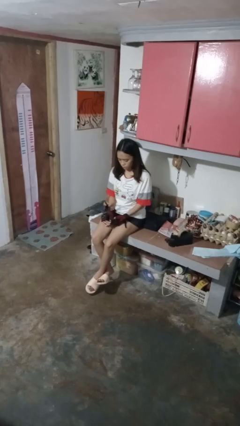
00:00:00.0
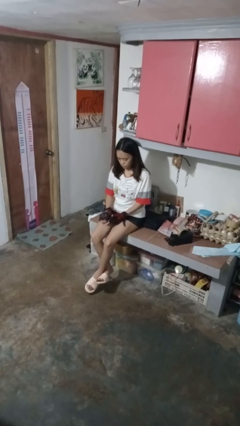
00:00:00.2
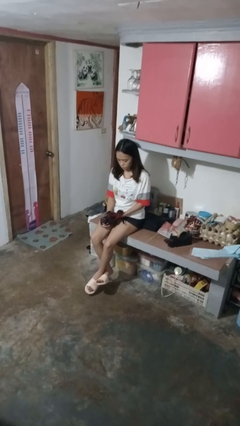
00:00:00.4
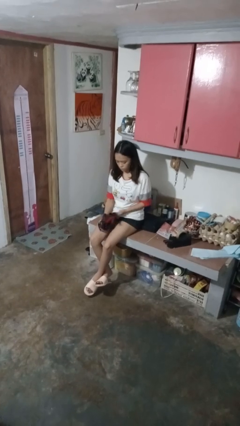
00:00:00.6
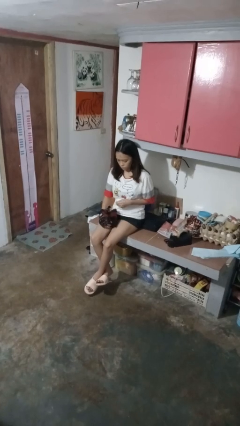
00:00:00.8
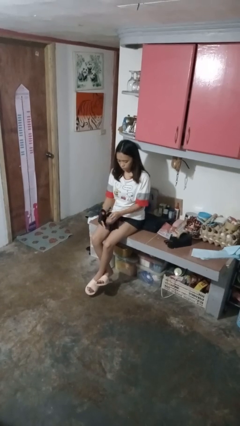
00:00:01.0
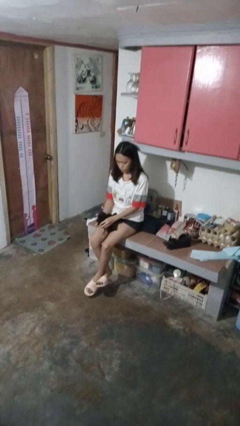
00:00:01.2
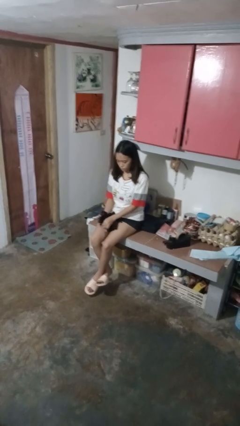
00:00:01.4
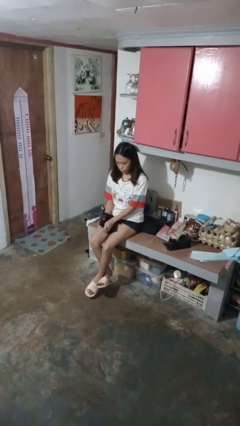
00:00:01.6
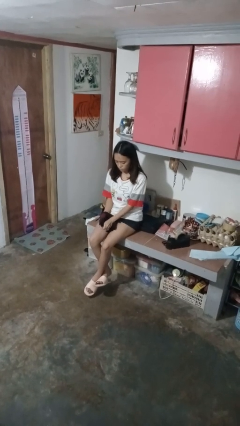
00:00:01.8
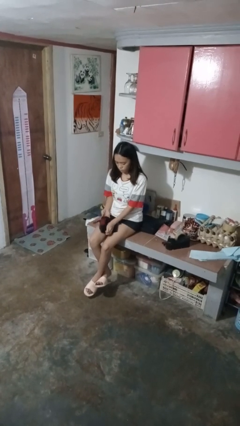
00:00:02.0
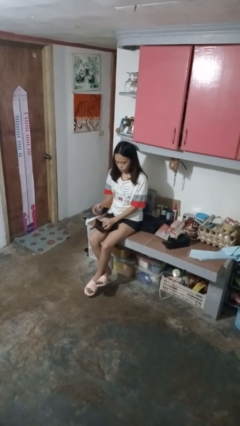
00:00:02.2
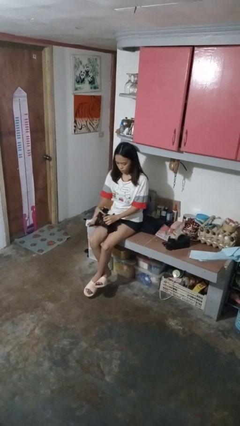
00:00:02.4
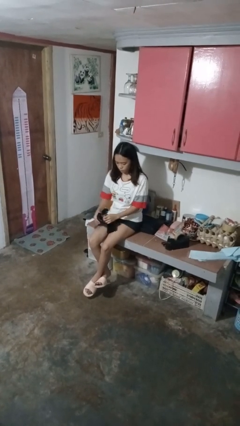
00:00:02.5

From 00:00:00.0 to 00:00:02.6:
person takes off gloves

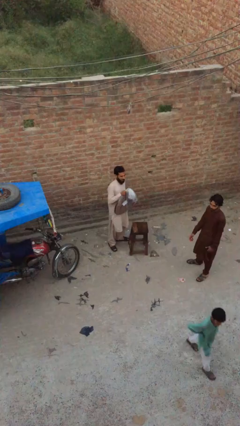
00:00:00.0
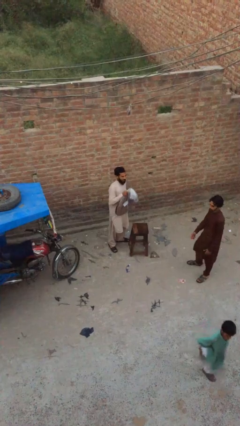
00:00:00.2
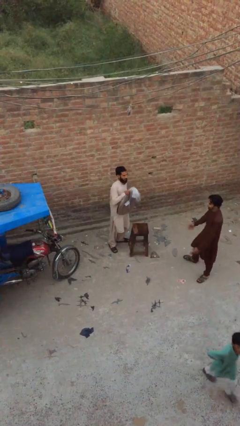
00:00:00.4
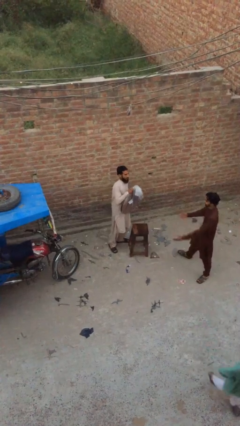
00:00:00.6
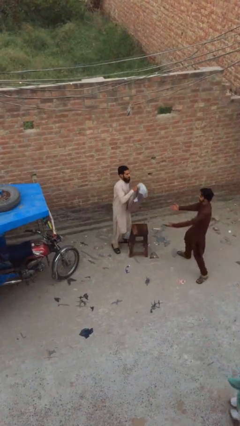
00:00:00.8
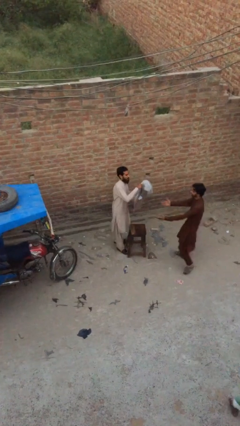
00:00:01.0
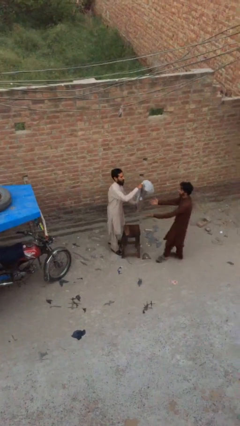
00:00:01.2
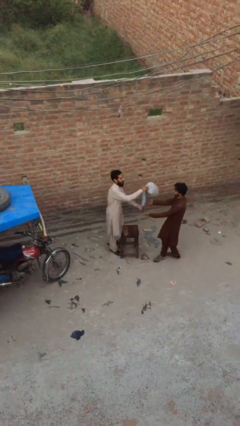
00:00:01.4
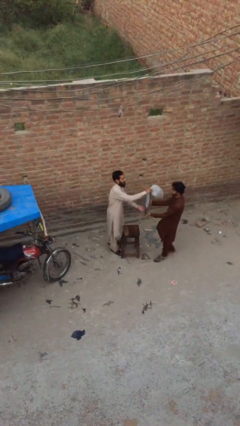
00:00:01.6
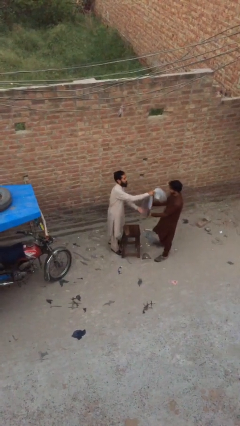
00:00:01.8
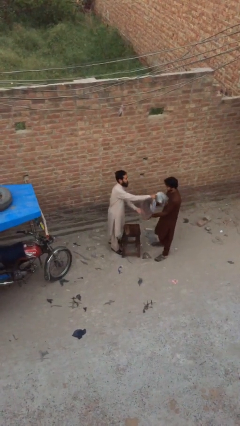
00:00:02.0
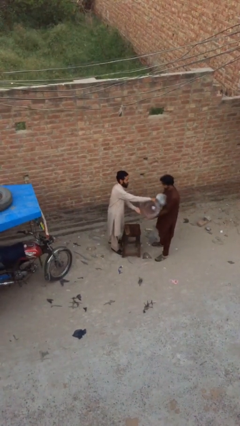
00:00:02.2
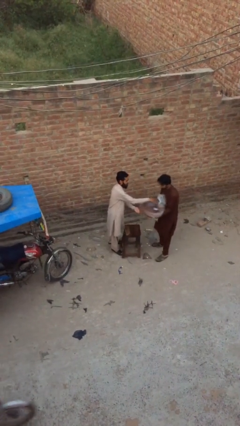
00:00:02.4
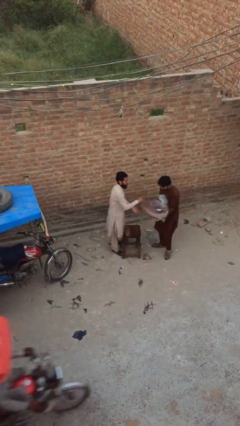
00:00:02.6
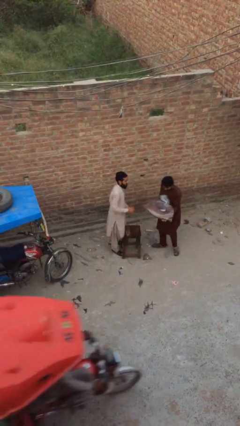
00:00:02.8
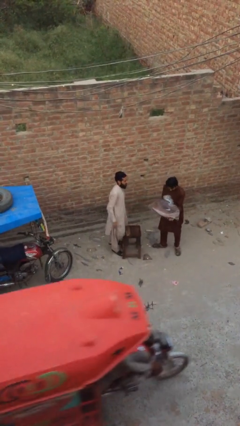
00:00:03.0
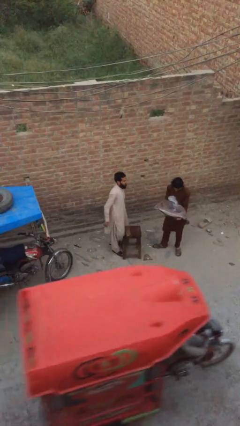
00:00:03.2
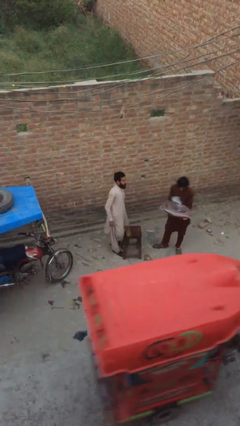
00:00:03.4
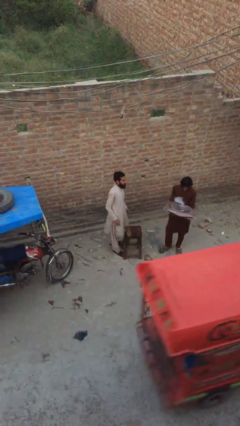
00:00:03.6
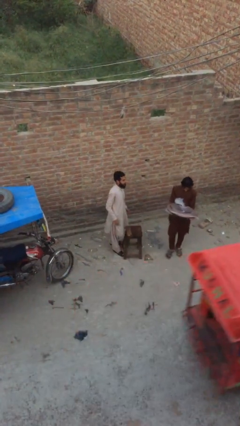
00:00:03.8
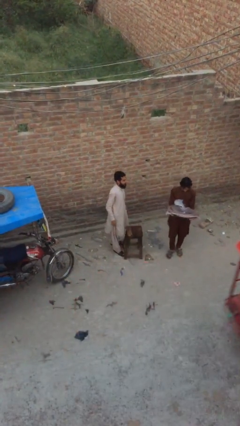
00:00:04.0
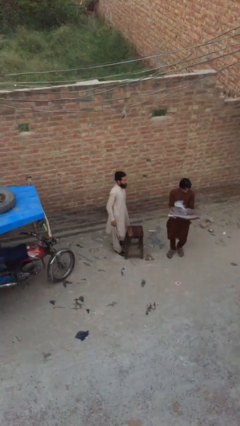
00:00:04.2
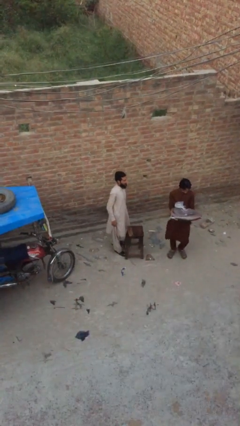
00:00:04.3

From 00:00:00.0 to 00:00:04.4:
person transfers object to person

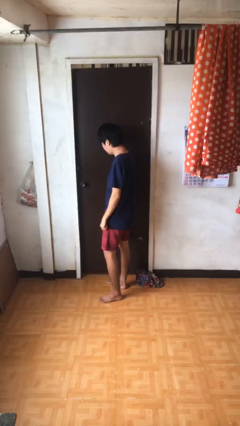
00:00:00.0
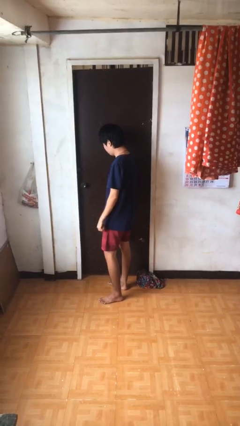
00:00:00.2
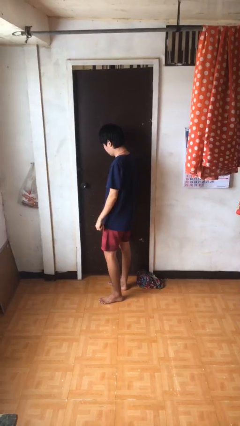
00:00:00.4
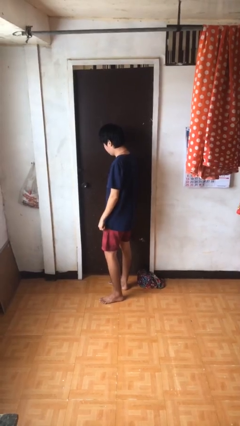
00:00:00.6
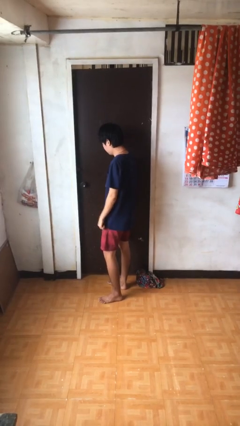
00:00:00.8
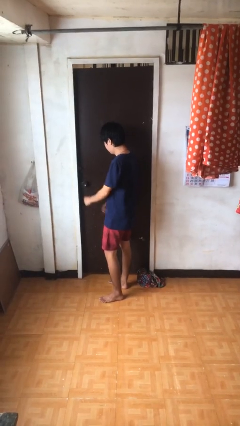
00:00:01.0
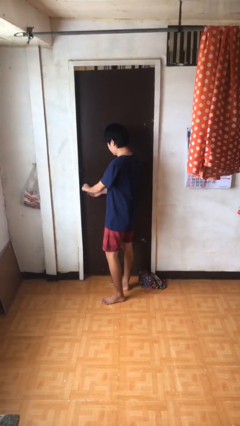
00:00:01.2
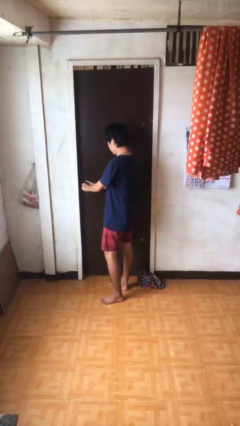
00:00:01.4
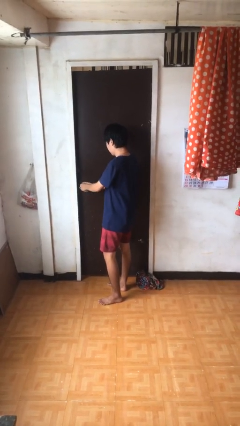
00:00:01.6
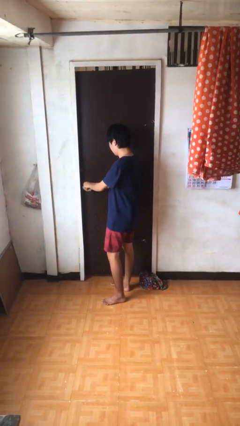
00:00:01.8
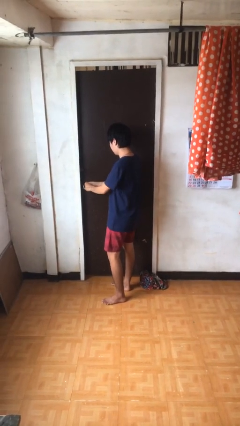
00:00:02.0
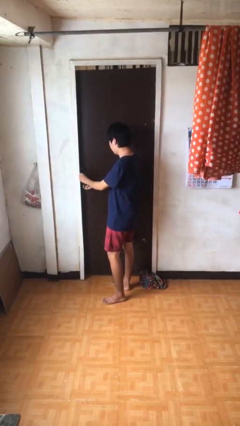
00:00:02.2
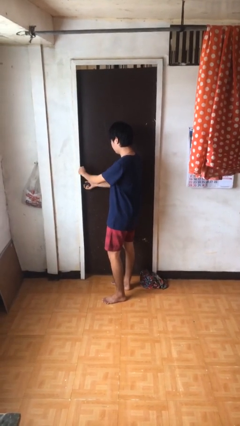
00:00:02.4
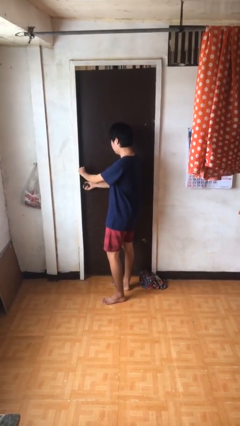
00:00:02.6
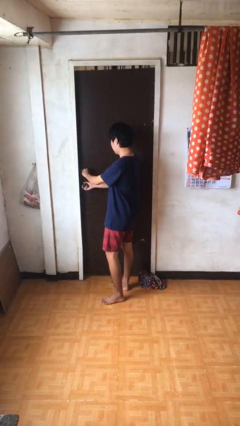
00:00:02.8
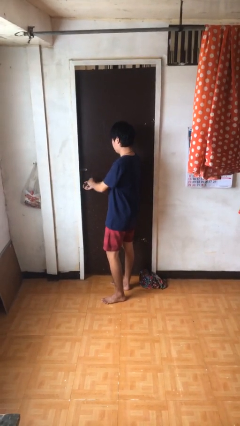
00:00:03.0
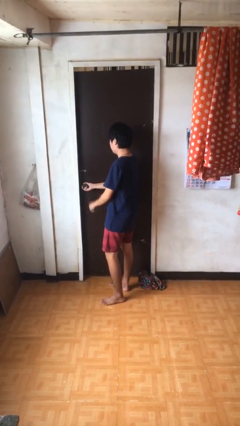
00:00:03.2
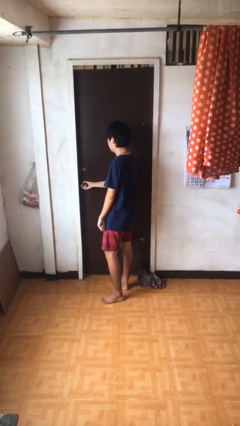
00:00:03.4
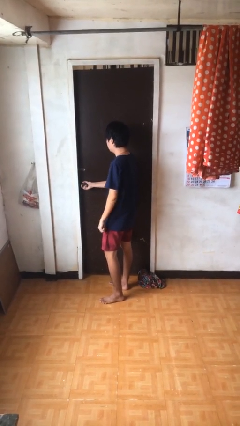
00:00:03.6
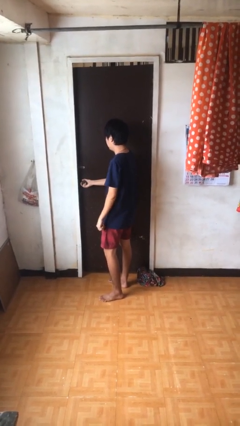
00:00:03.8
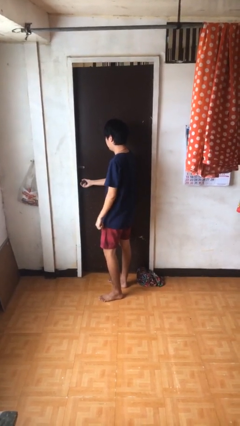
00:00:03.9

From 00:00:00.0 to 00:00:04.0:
person unlocks door with keys

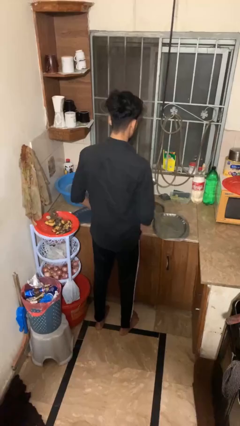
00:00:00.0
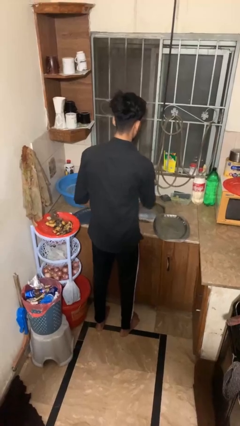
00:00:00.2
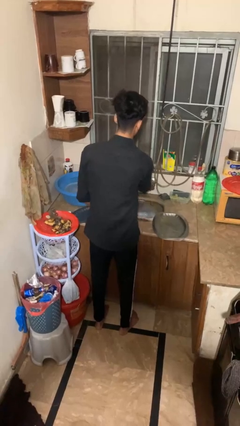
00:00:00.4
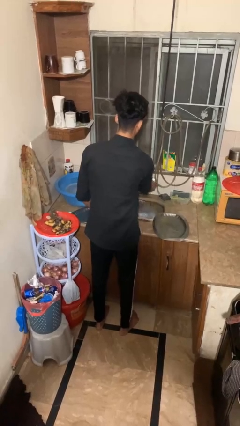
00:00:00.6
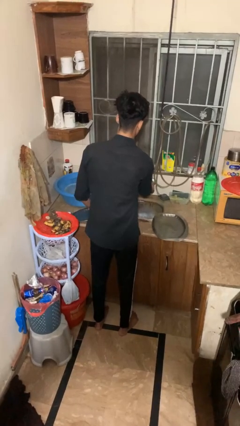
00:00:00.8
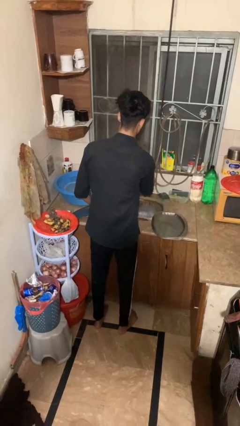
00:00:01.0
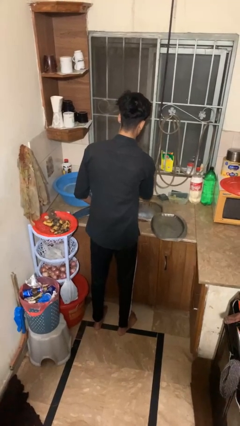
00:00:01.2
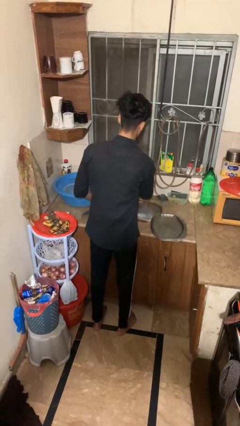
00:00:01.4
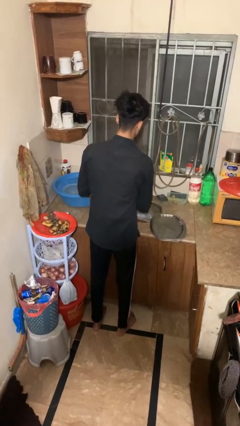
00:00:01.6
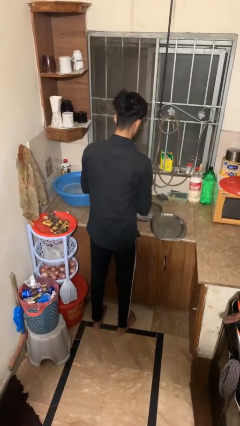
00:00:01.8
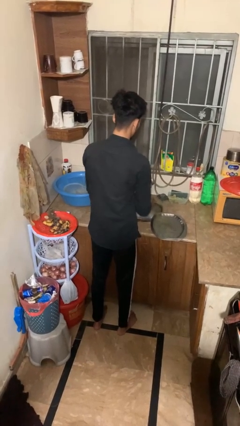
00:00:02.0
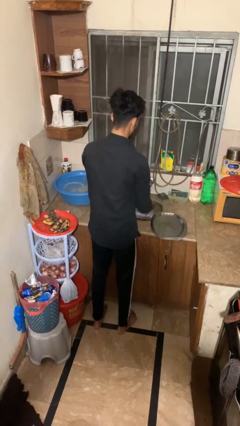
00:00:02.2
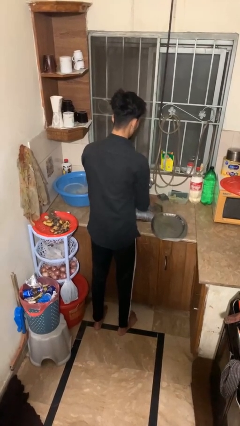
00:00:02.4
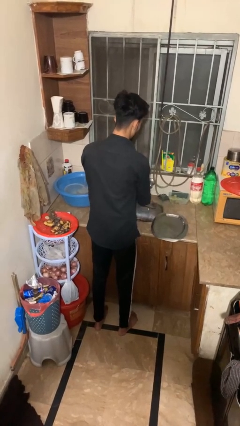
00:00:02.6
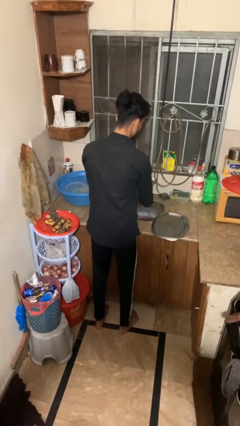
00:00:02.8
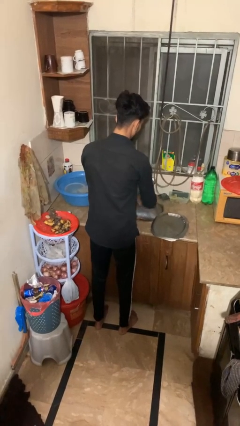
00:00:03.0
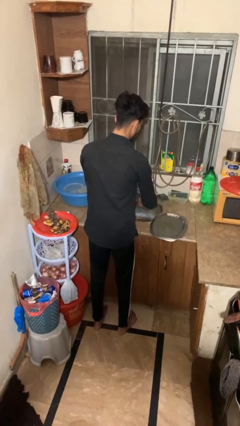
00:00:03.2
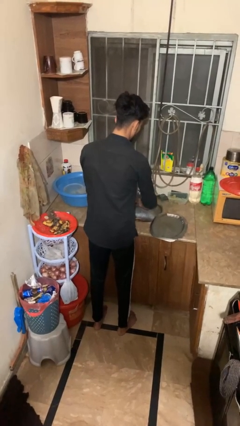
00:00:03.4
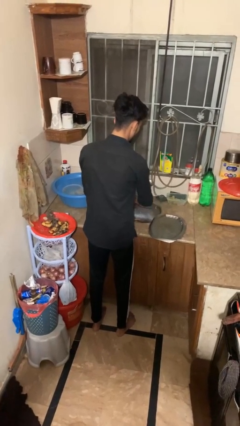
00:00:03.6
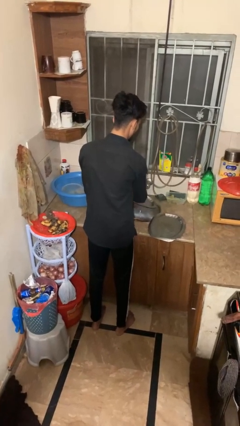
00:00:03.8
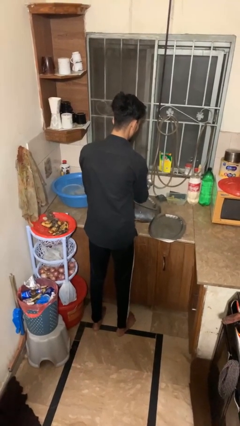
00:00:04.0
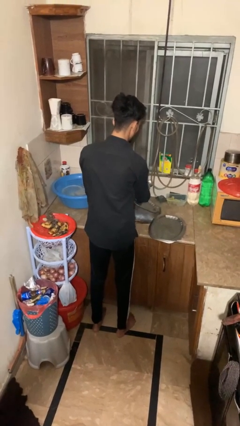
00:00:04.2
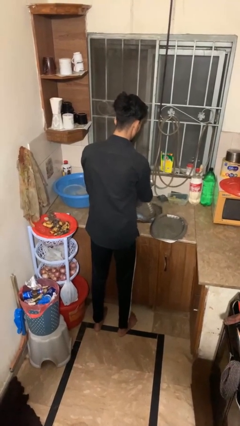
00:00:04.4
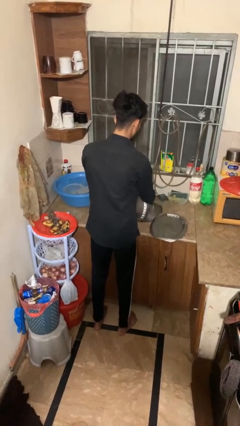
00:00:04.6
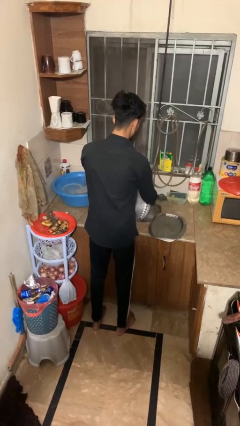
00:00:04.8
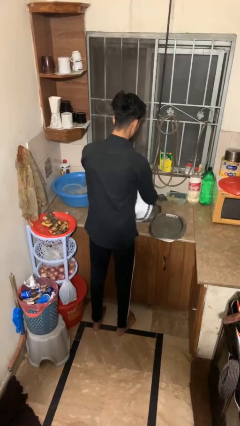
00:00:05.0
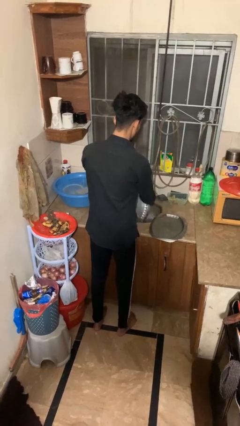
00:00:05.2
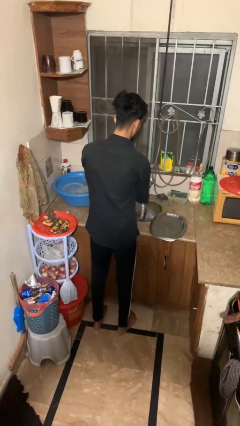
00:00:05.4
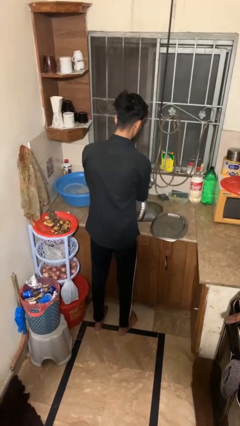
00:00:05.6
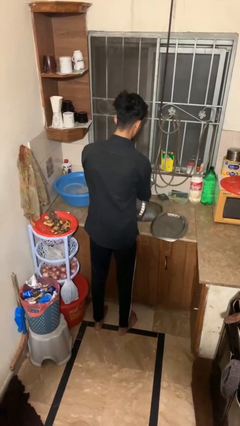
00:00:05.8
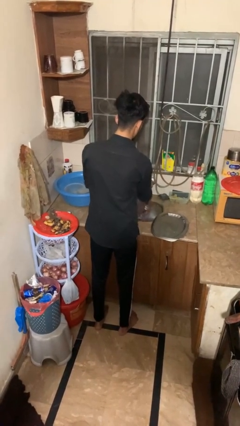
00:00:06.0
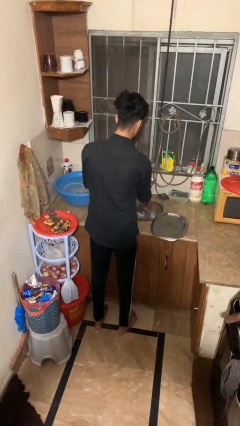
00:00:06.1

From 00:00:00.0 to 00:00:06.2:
person opens dishwasher

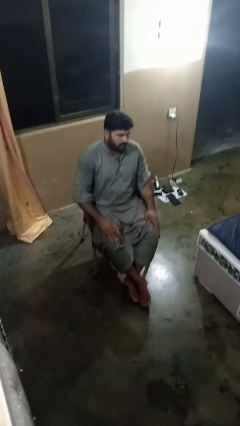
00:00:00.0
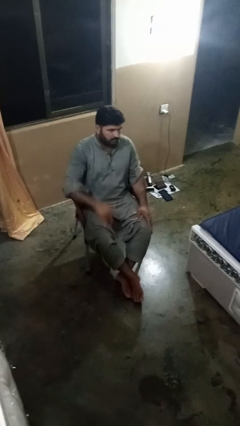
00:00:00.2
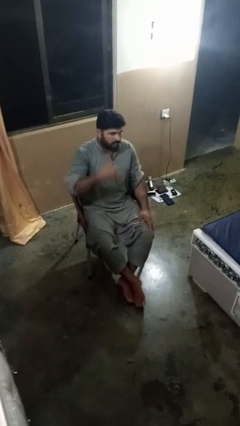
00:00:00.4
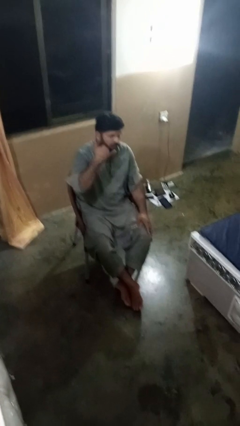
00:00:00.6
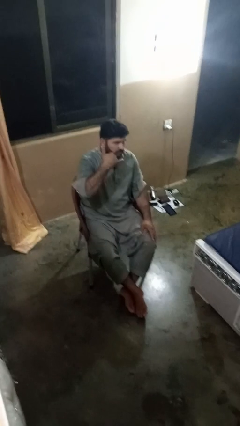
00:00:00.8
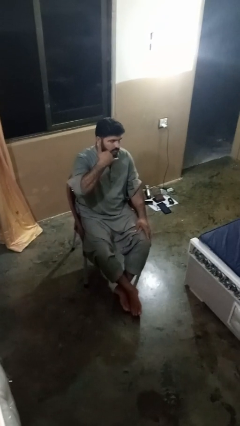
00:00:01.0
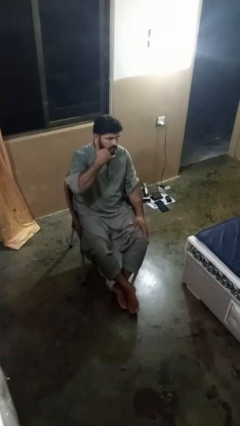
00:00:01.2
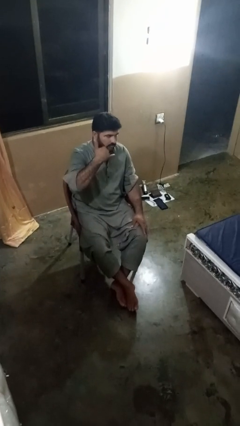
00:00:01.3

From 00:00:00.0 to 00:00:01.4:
person gestures call me
